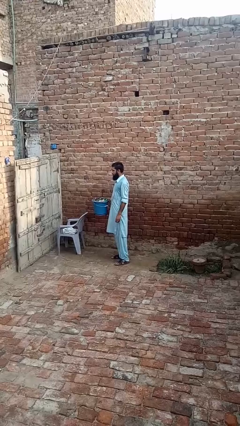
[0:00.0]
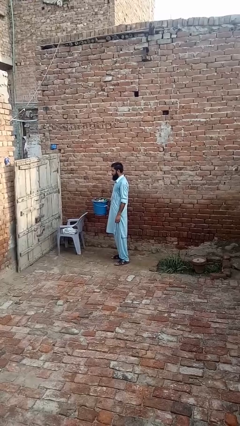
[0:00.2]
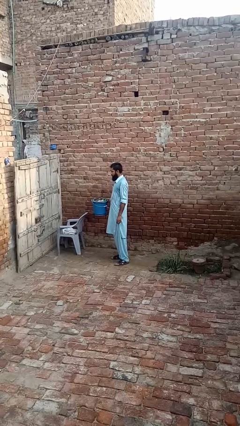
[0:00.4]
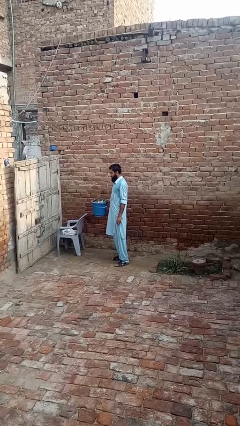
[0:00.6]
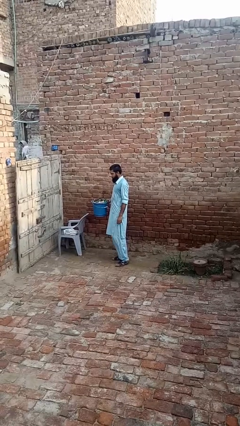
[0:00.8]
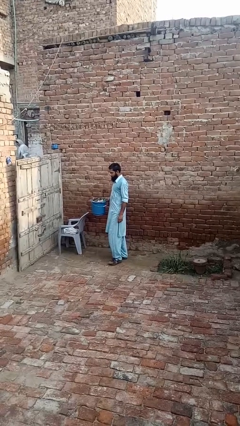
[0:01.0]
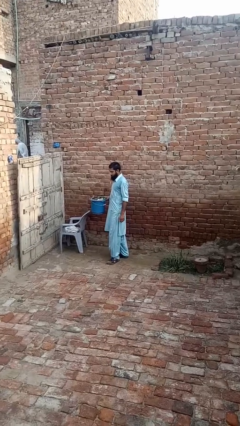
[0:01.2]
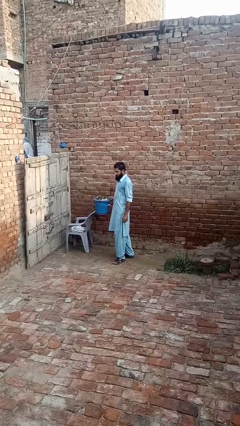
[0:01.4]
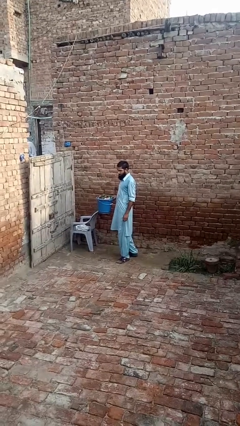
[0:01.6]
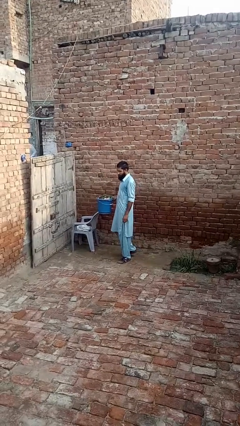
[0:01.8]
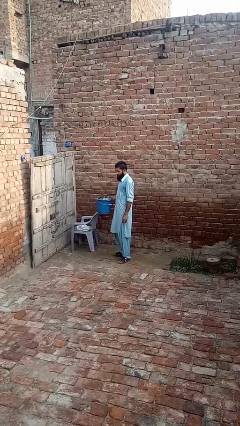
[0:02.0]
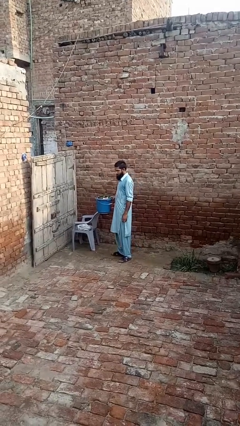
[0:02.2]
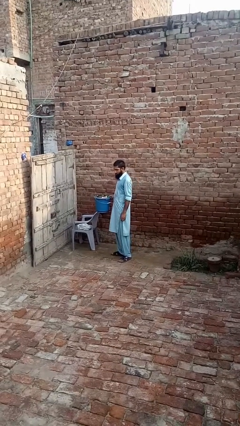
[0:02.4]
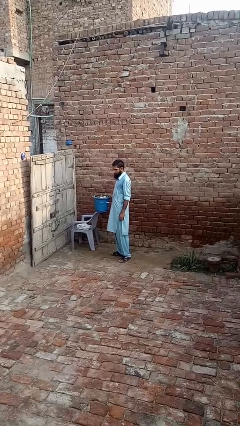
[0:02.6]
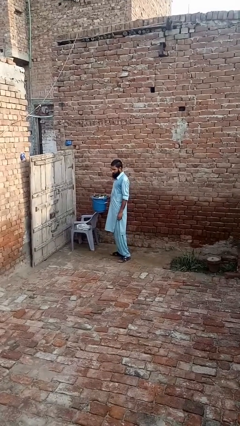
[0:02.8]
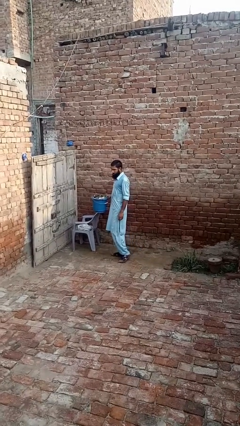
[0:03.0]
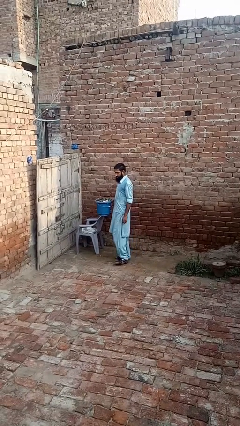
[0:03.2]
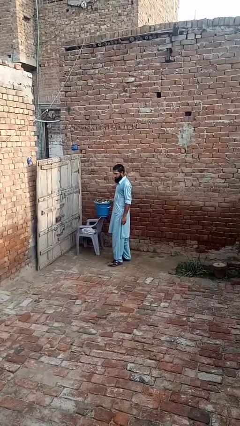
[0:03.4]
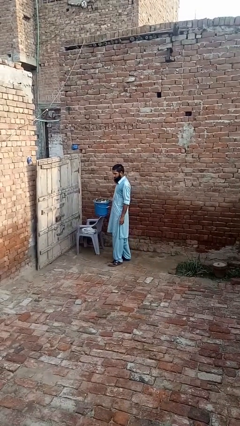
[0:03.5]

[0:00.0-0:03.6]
person carries laundry basket

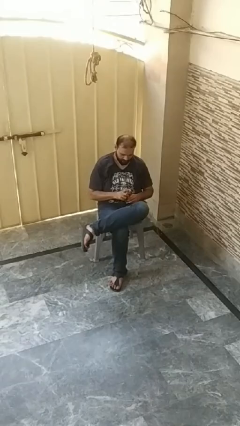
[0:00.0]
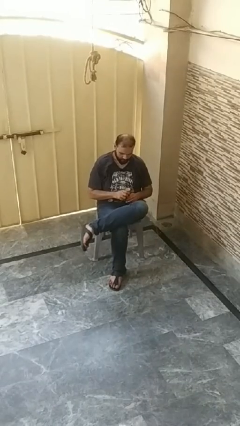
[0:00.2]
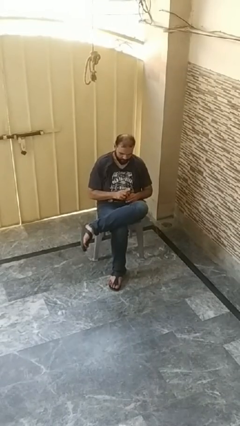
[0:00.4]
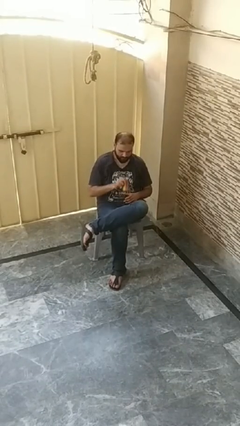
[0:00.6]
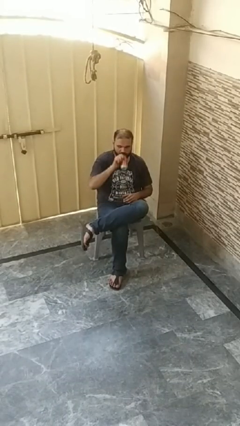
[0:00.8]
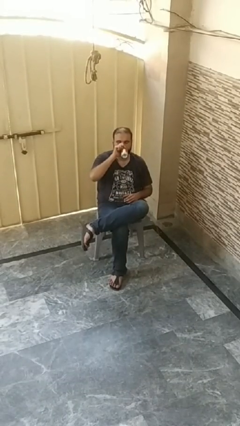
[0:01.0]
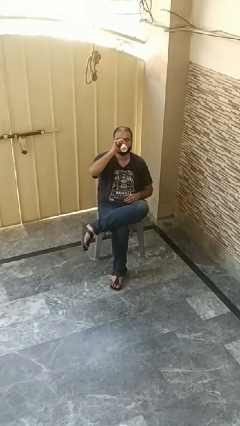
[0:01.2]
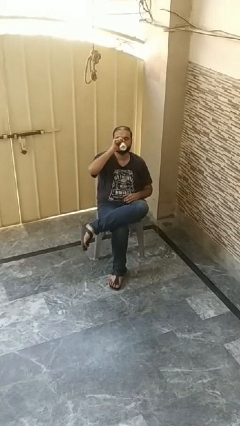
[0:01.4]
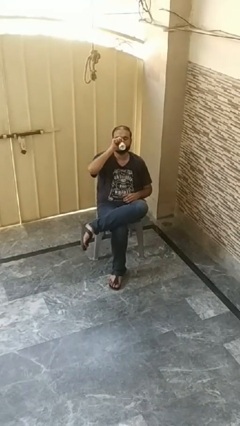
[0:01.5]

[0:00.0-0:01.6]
person drinks from beverage can

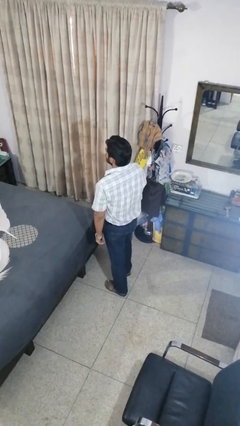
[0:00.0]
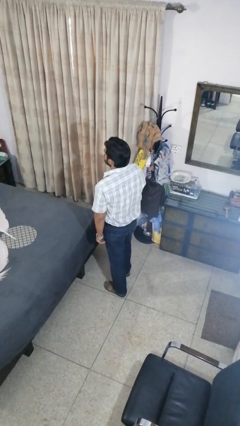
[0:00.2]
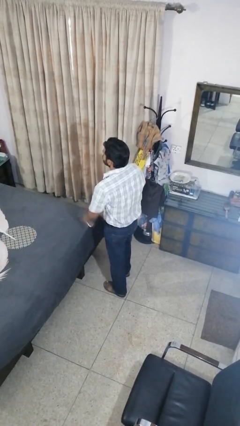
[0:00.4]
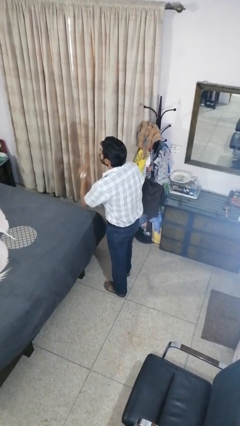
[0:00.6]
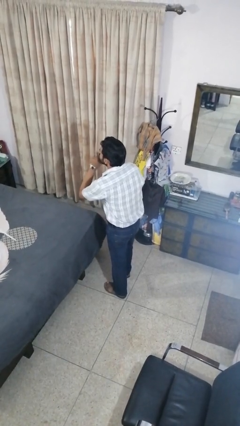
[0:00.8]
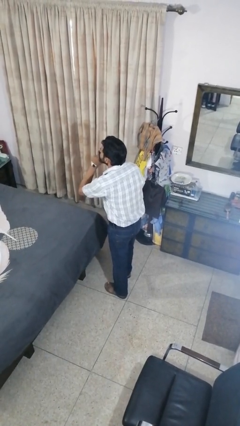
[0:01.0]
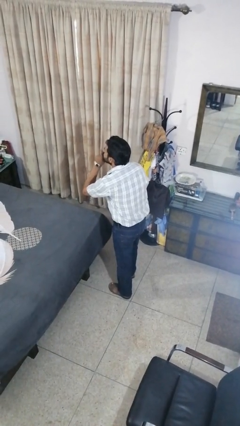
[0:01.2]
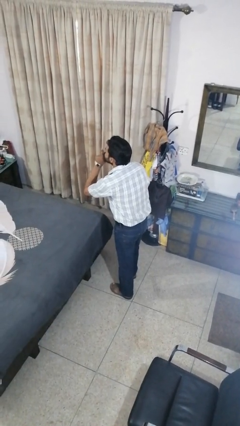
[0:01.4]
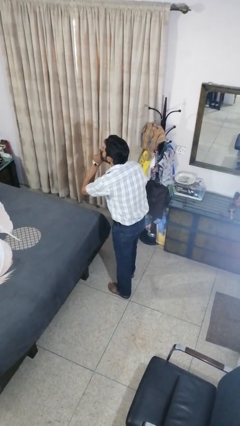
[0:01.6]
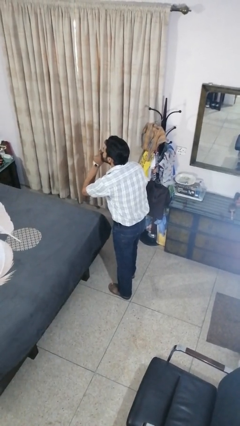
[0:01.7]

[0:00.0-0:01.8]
person gestures be quiet

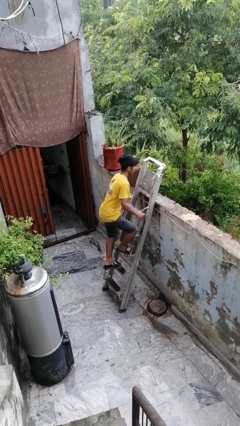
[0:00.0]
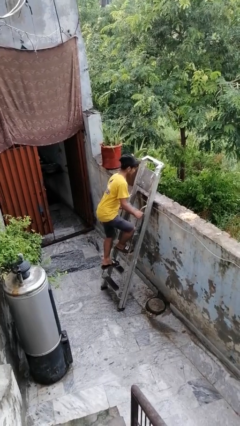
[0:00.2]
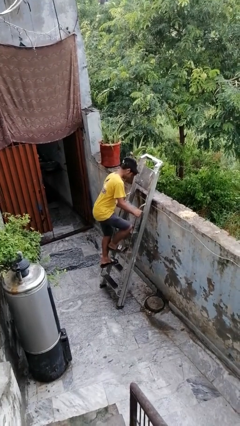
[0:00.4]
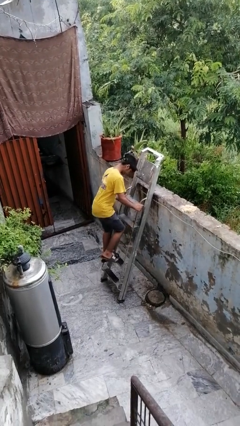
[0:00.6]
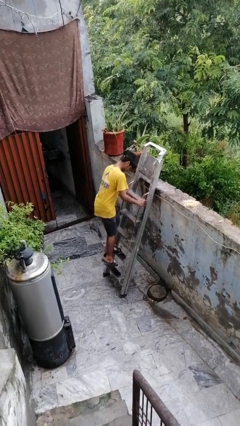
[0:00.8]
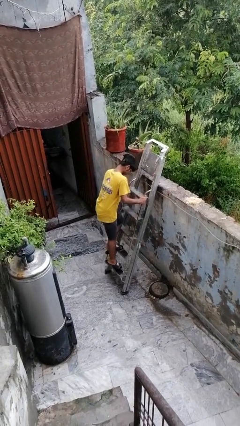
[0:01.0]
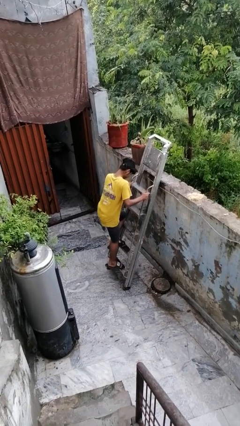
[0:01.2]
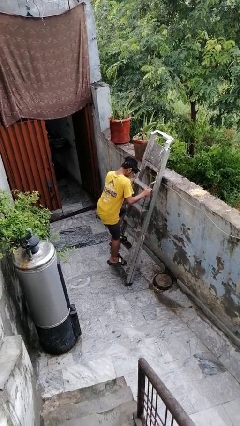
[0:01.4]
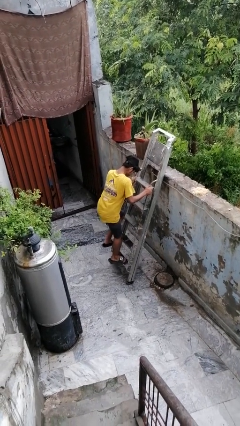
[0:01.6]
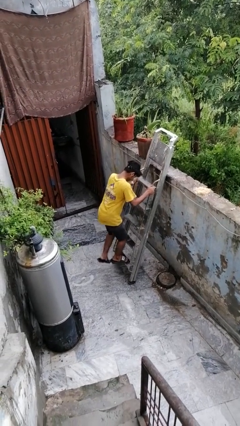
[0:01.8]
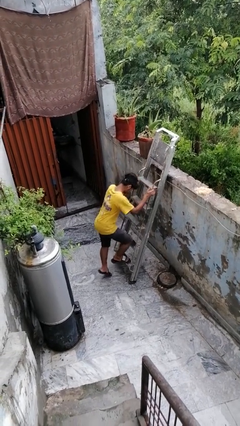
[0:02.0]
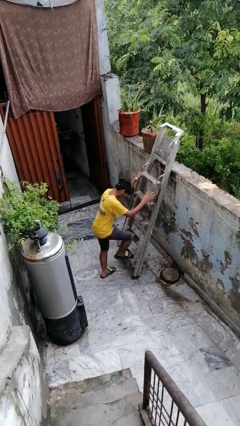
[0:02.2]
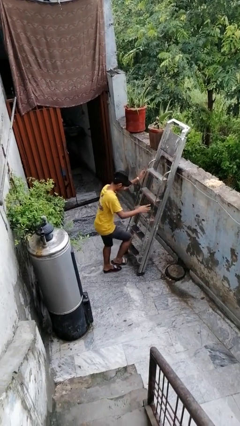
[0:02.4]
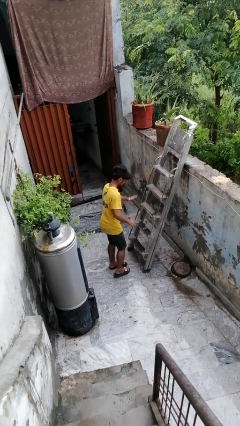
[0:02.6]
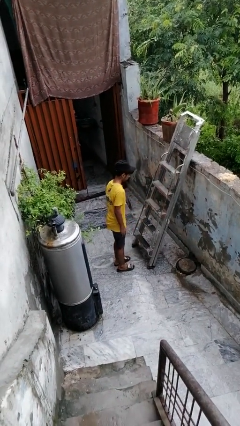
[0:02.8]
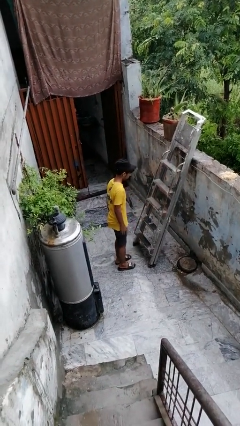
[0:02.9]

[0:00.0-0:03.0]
person climbs down ladder

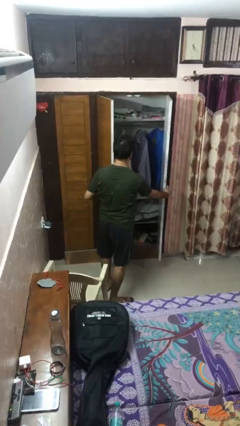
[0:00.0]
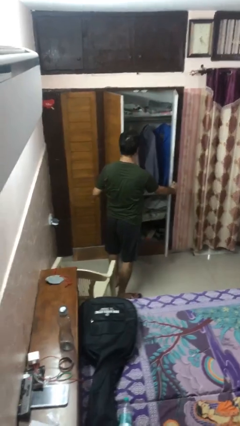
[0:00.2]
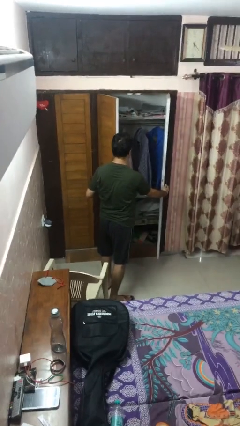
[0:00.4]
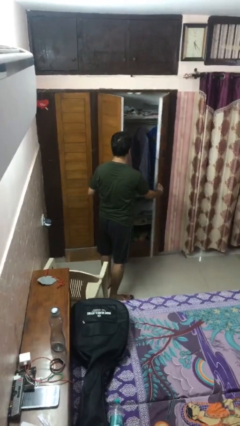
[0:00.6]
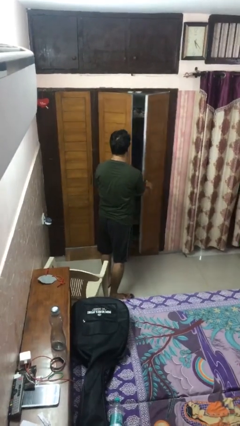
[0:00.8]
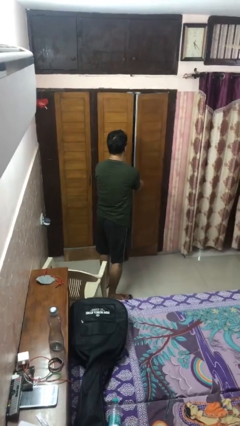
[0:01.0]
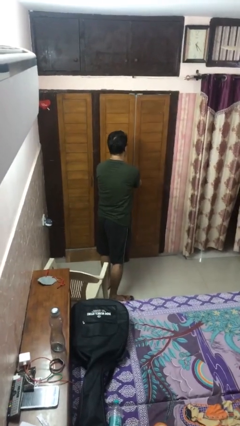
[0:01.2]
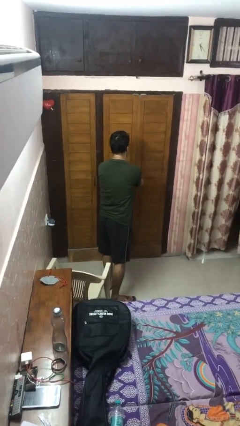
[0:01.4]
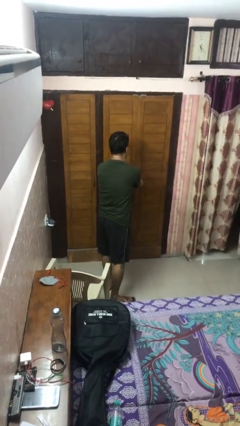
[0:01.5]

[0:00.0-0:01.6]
person closes closet door

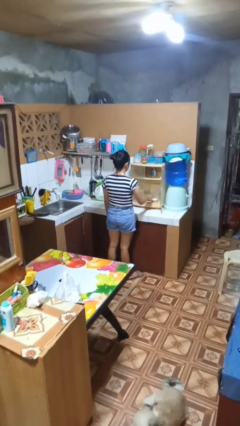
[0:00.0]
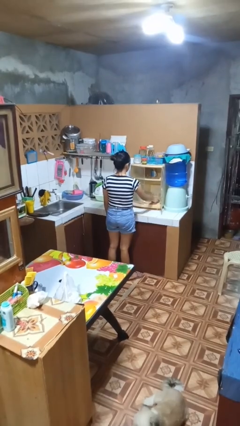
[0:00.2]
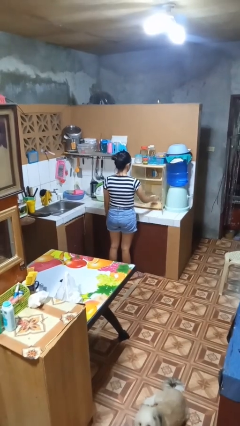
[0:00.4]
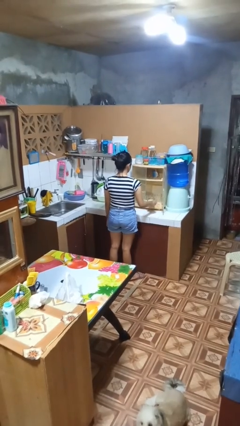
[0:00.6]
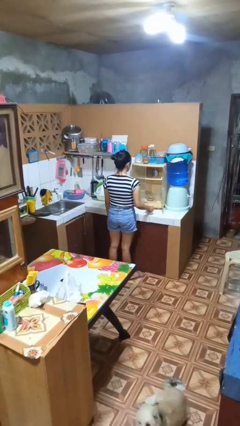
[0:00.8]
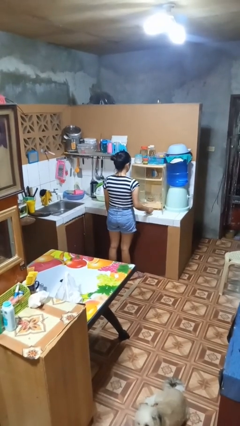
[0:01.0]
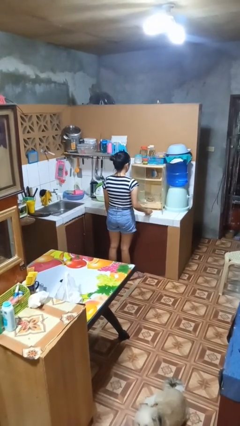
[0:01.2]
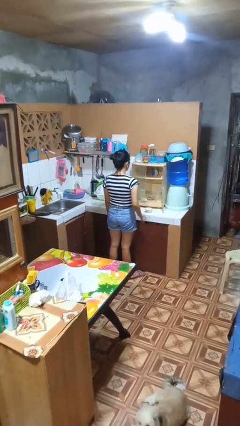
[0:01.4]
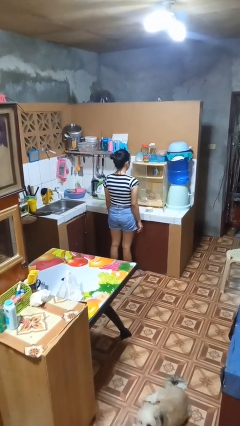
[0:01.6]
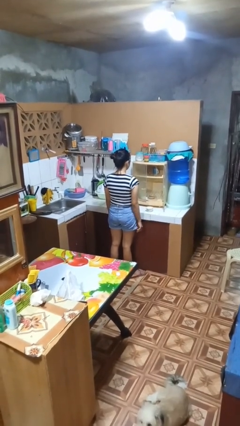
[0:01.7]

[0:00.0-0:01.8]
person takes object from cabinet

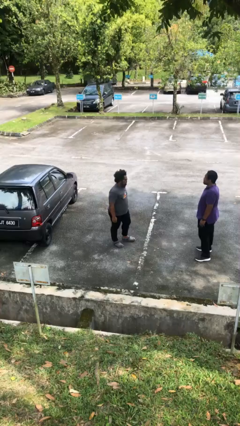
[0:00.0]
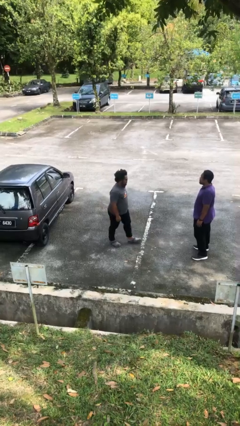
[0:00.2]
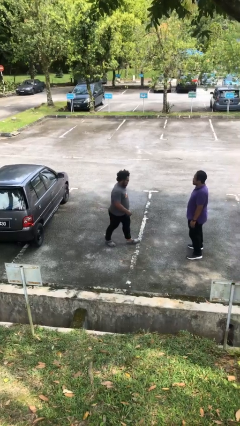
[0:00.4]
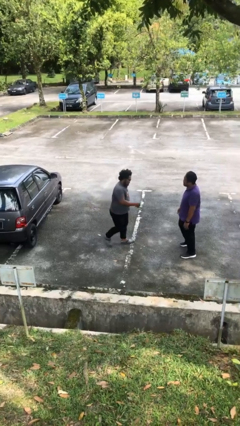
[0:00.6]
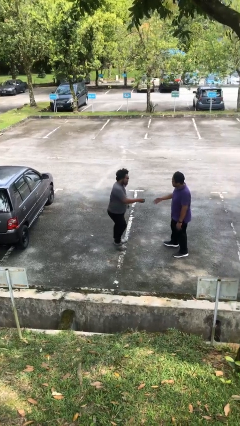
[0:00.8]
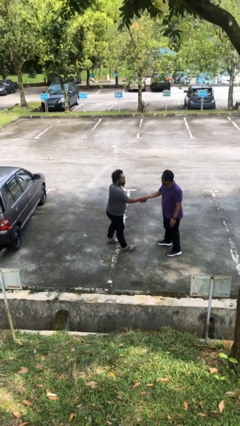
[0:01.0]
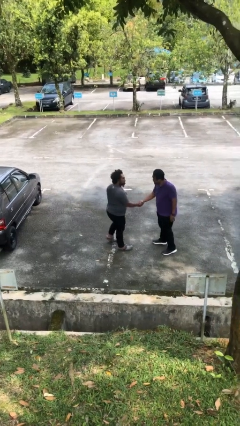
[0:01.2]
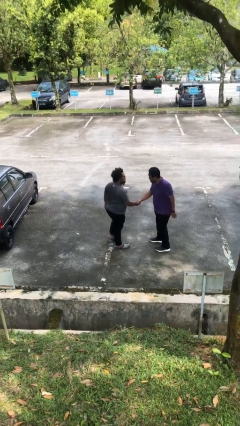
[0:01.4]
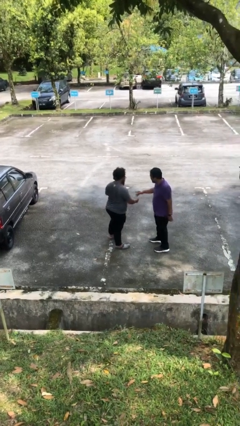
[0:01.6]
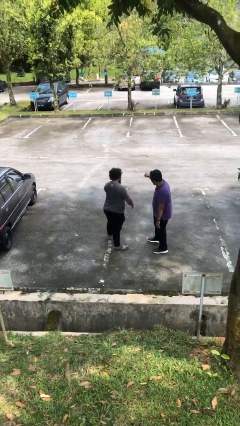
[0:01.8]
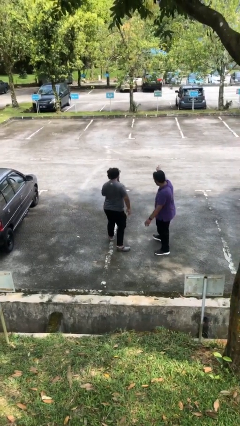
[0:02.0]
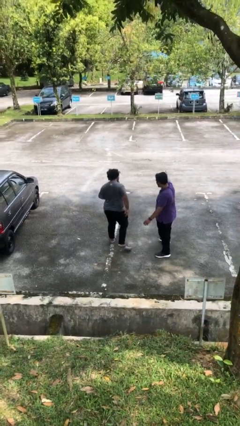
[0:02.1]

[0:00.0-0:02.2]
person shakes hand

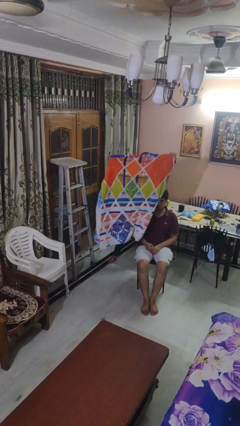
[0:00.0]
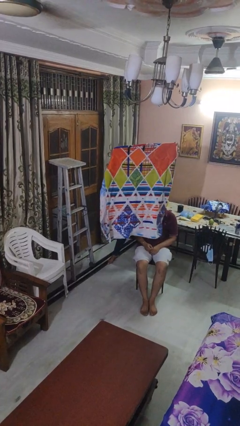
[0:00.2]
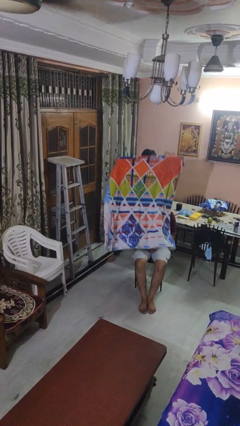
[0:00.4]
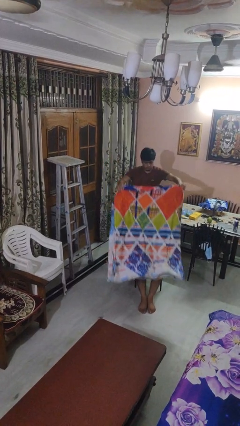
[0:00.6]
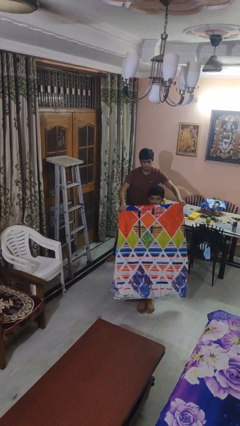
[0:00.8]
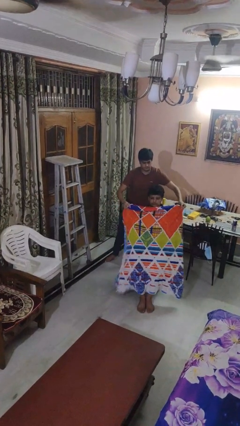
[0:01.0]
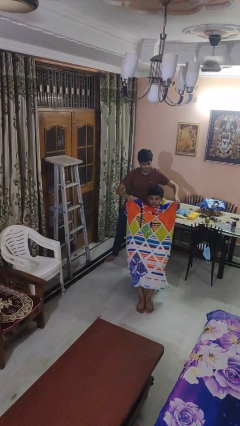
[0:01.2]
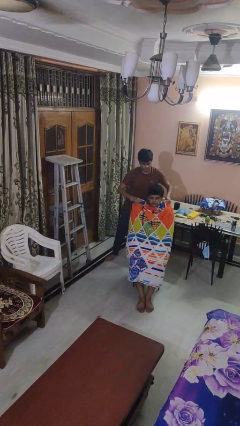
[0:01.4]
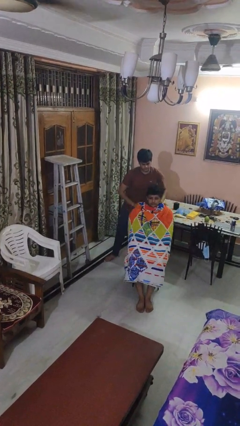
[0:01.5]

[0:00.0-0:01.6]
person covers friend with blanket
